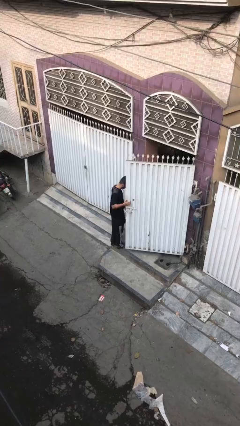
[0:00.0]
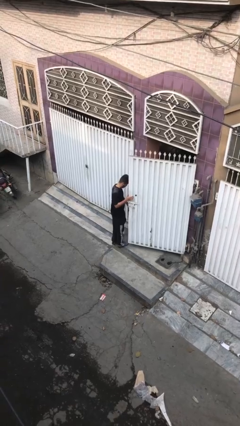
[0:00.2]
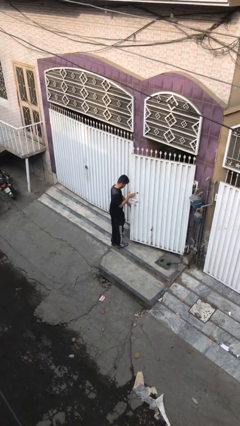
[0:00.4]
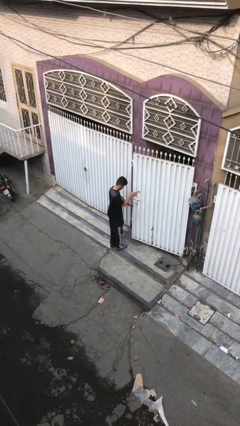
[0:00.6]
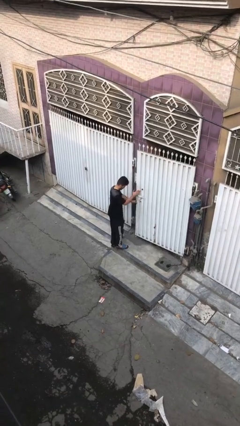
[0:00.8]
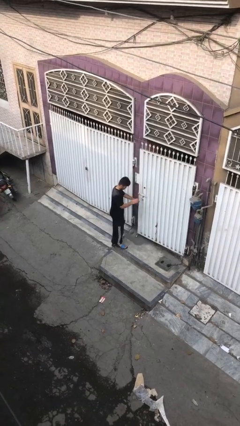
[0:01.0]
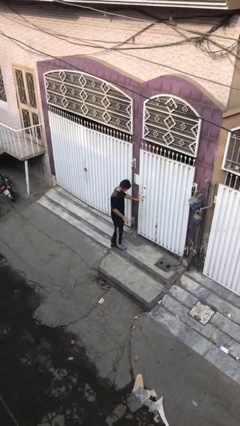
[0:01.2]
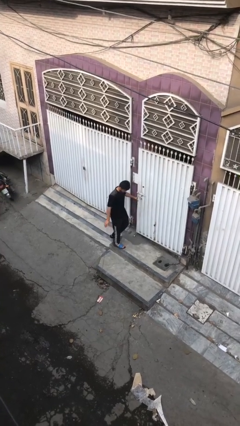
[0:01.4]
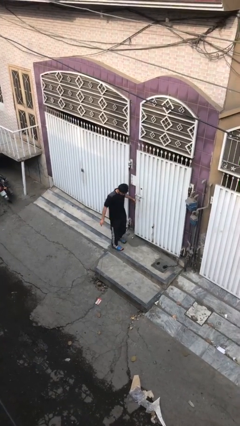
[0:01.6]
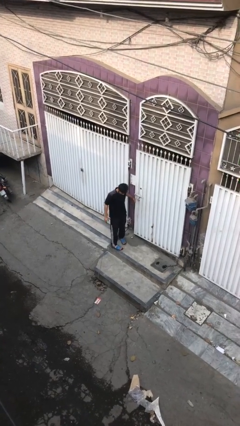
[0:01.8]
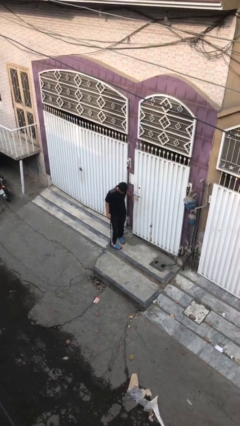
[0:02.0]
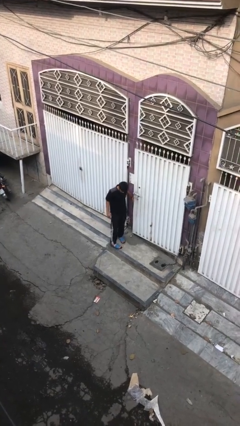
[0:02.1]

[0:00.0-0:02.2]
person closes facility door

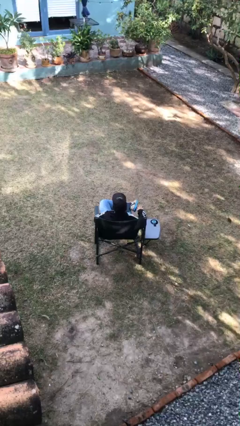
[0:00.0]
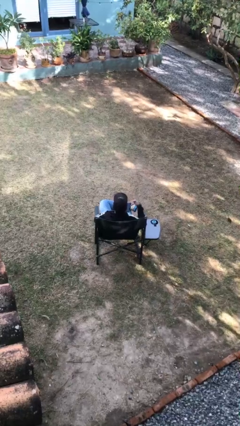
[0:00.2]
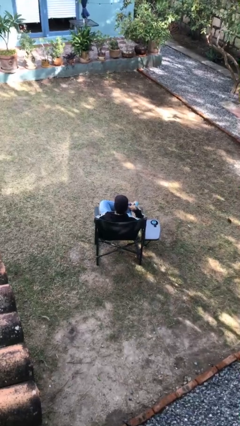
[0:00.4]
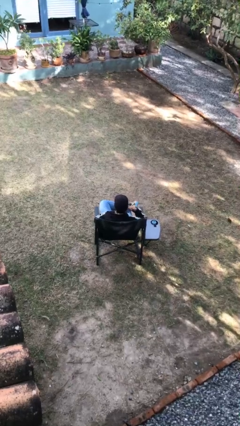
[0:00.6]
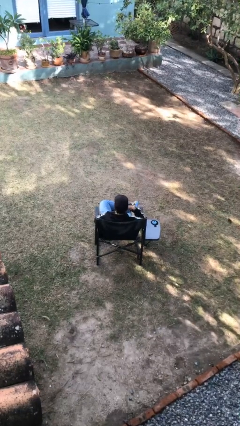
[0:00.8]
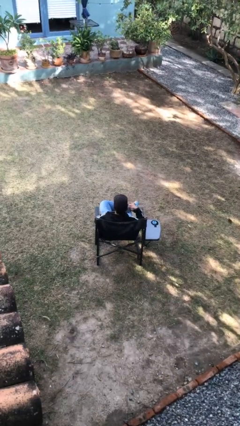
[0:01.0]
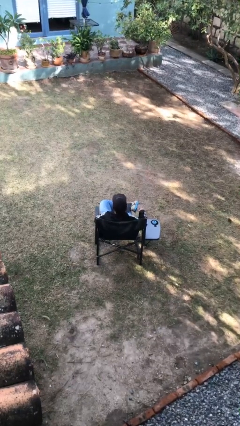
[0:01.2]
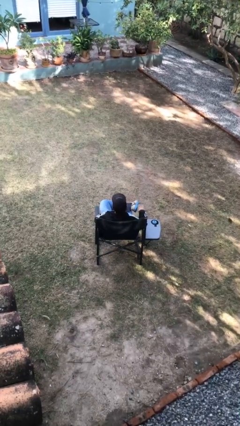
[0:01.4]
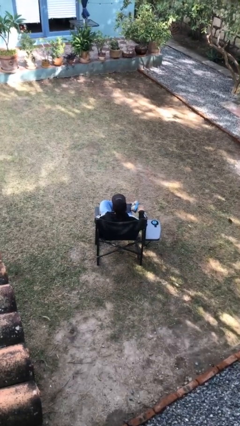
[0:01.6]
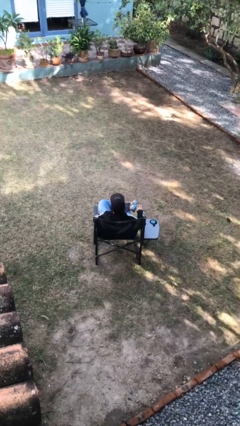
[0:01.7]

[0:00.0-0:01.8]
person gestures call me

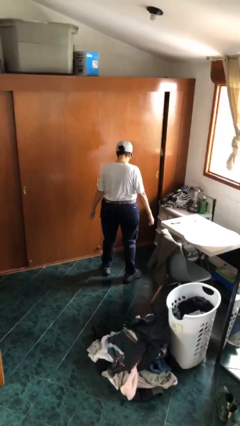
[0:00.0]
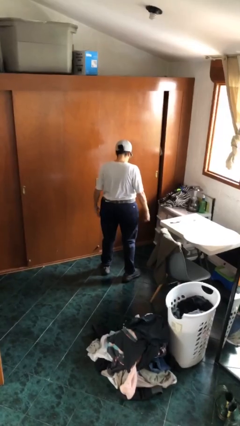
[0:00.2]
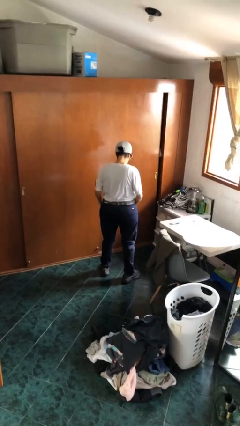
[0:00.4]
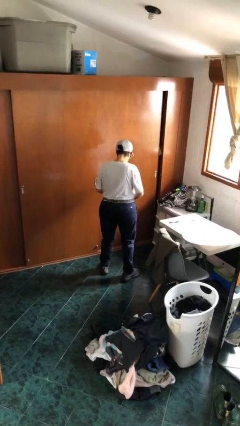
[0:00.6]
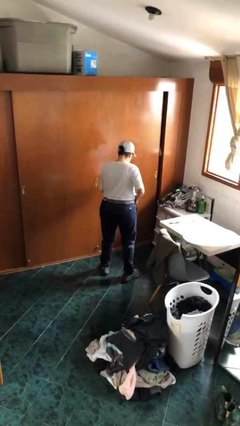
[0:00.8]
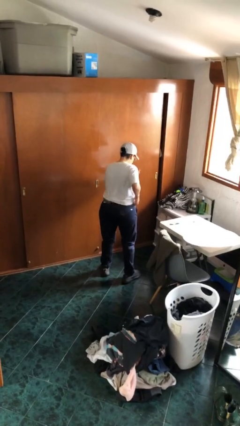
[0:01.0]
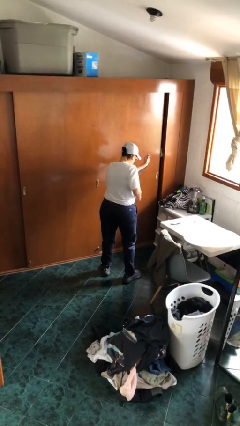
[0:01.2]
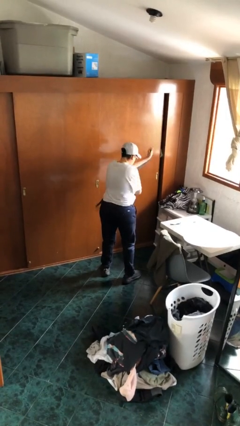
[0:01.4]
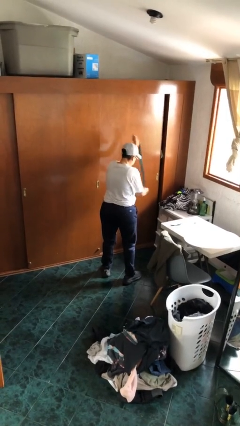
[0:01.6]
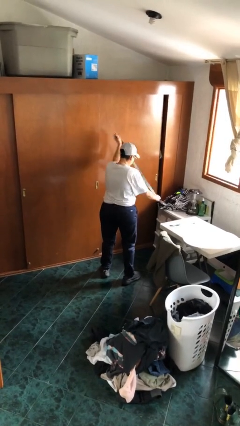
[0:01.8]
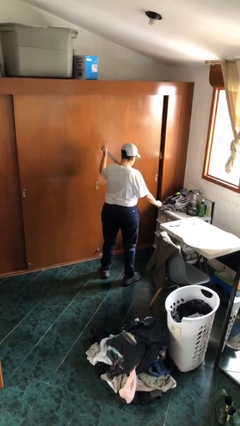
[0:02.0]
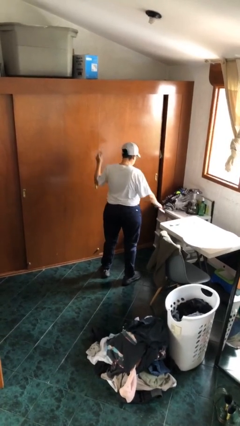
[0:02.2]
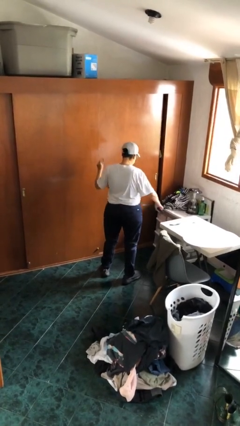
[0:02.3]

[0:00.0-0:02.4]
person takes off belt

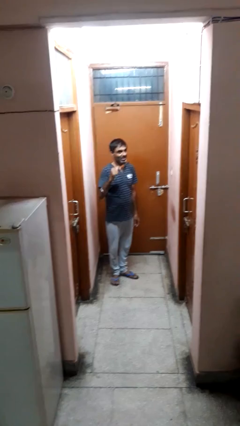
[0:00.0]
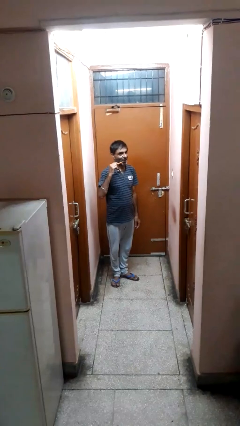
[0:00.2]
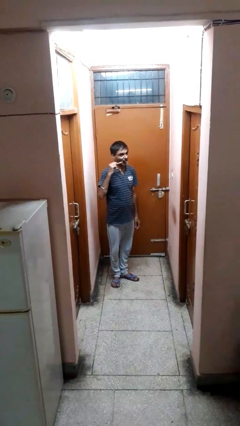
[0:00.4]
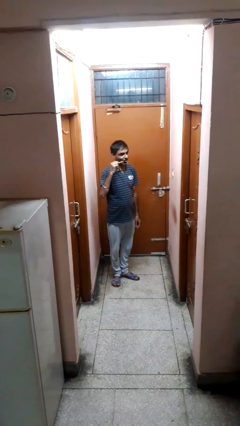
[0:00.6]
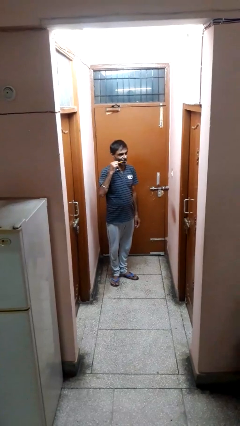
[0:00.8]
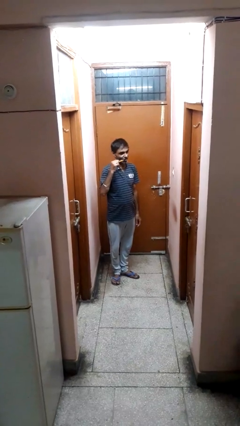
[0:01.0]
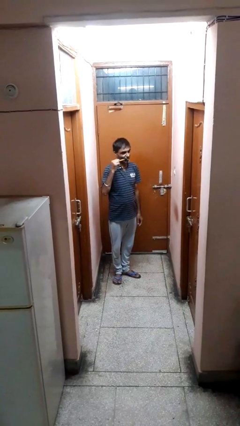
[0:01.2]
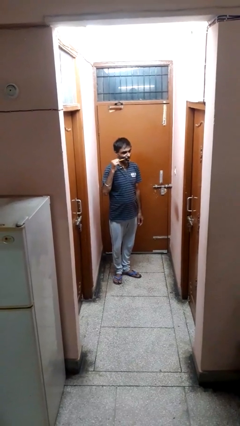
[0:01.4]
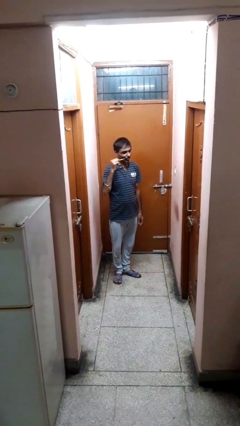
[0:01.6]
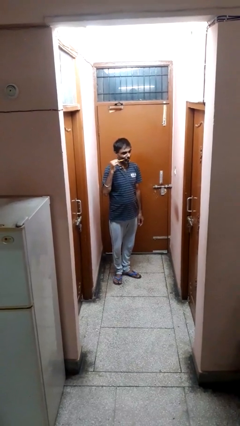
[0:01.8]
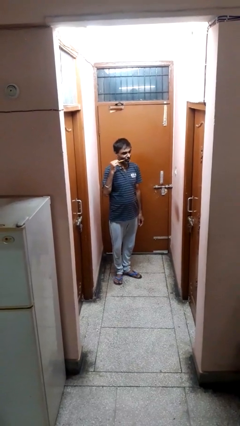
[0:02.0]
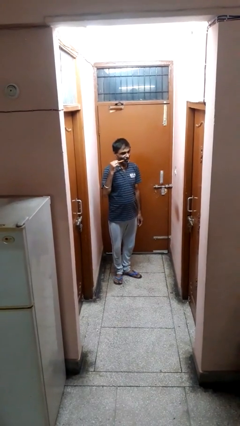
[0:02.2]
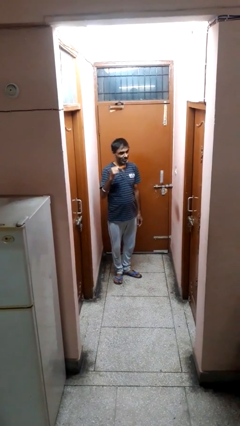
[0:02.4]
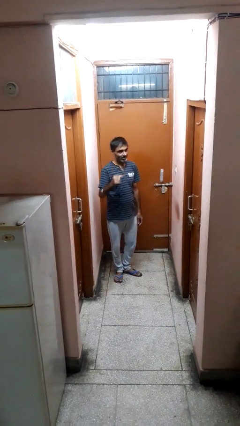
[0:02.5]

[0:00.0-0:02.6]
person brushes teeth

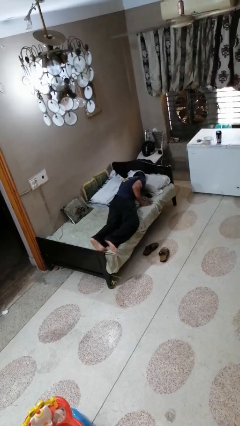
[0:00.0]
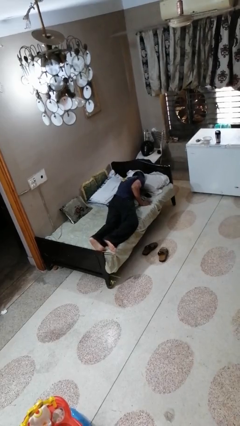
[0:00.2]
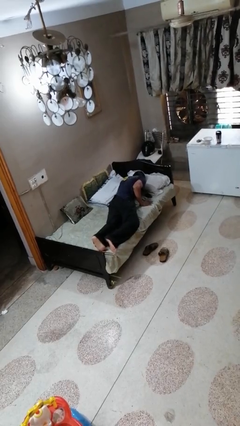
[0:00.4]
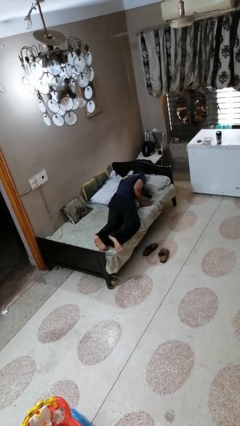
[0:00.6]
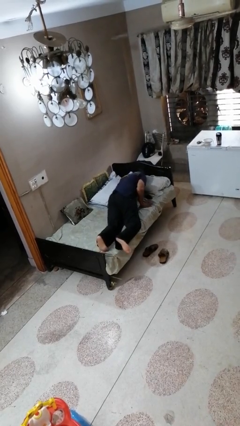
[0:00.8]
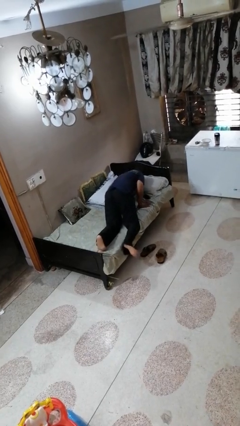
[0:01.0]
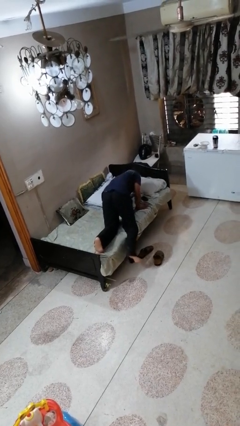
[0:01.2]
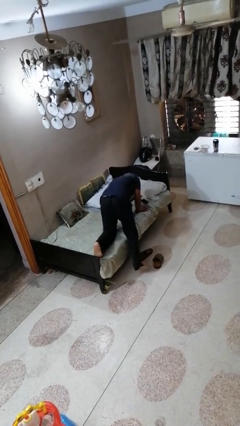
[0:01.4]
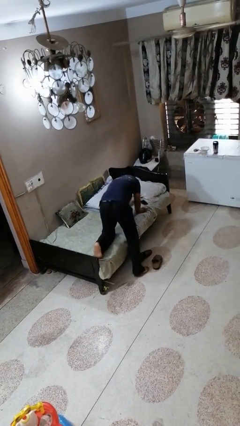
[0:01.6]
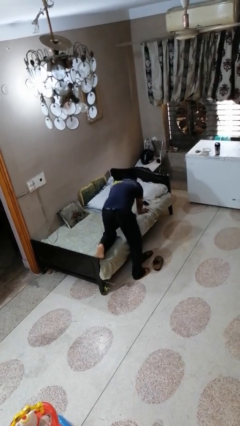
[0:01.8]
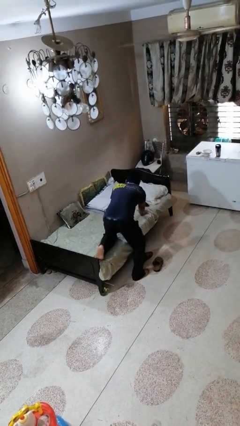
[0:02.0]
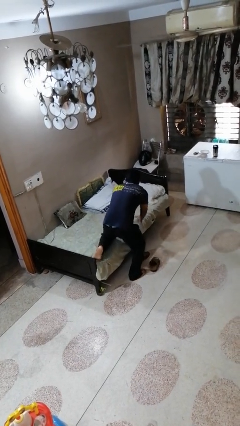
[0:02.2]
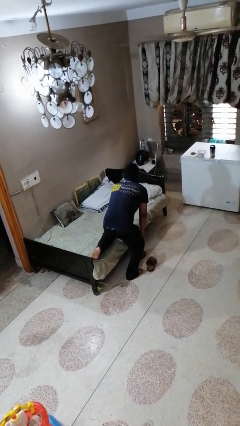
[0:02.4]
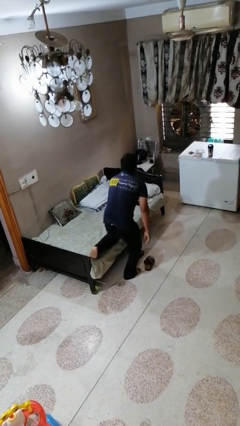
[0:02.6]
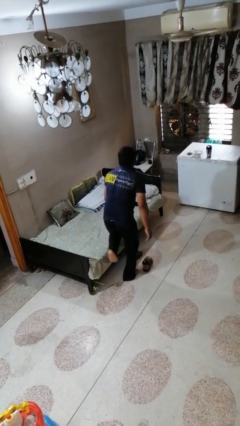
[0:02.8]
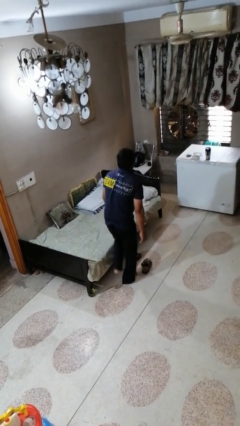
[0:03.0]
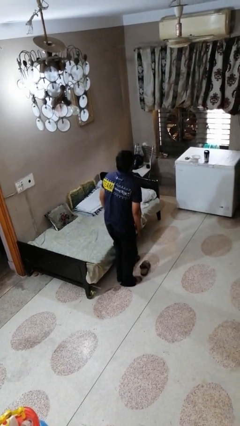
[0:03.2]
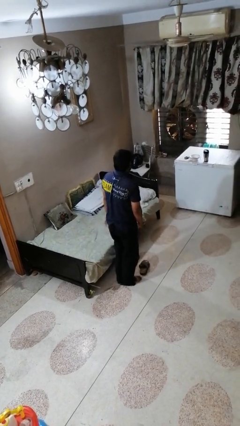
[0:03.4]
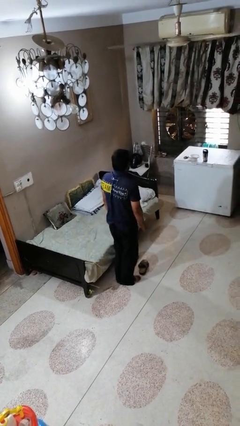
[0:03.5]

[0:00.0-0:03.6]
person stands up

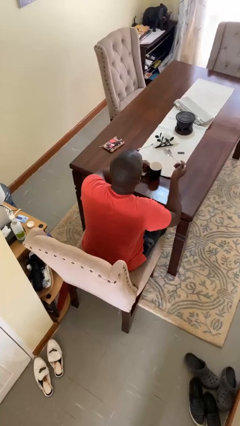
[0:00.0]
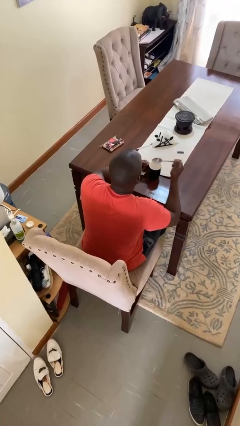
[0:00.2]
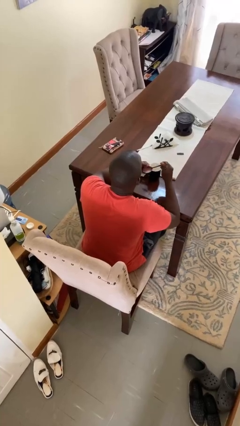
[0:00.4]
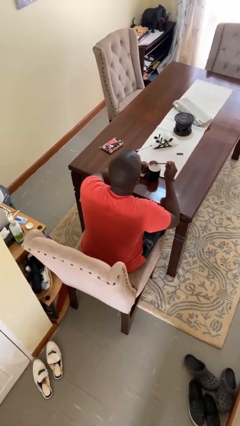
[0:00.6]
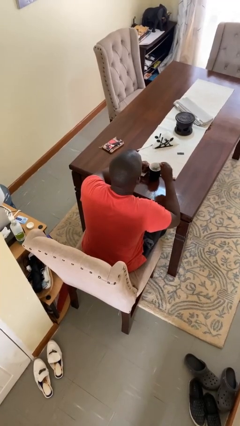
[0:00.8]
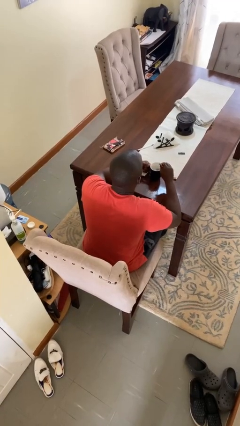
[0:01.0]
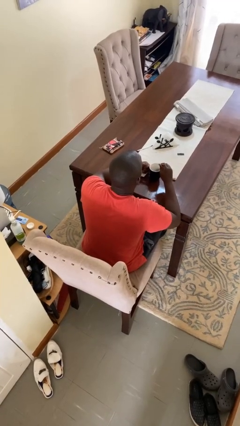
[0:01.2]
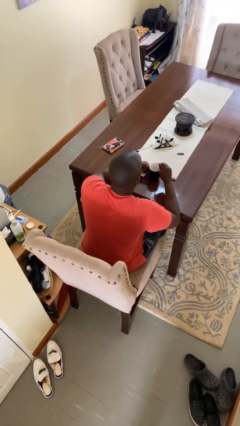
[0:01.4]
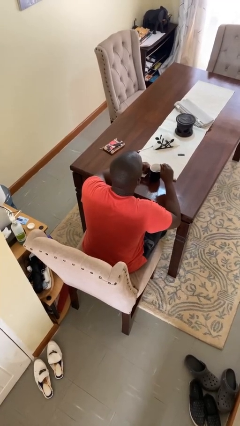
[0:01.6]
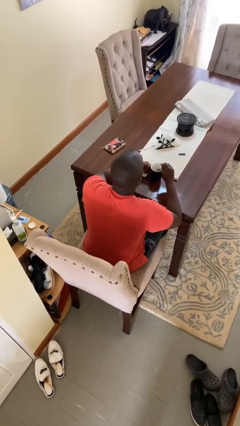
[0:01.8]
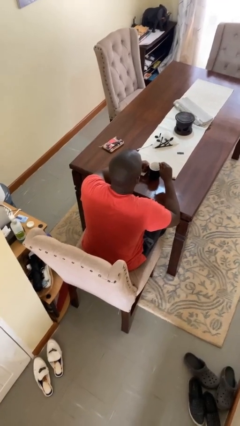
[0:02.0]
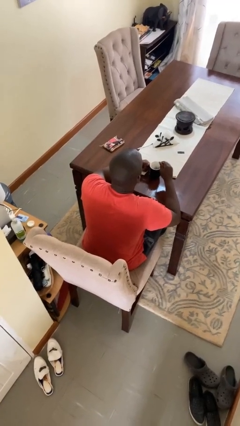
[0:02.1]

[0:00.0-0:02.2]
person stirs mug

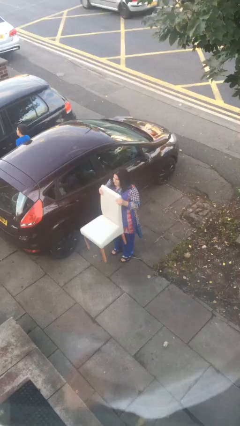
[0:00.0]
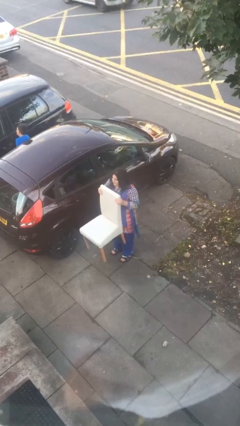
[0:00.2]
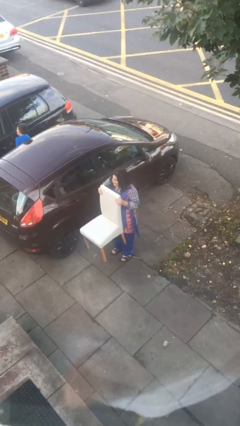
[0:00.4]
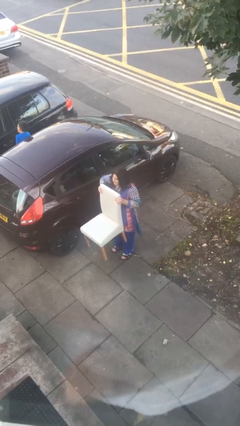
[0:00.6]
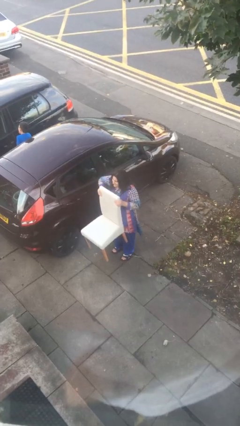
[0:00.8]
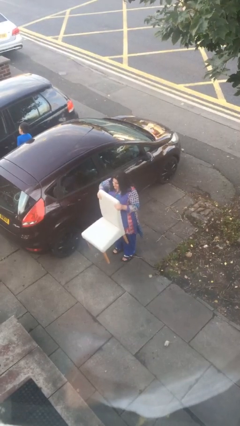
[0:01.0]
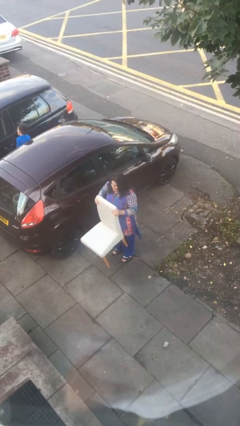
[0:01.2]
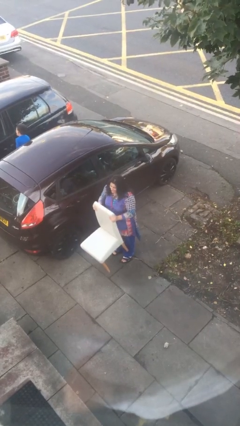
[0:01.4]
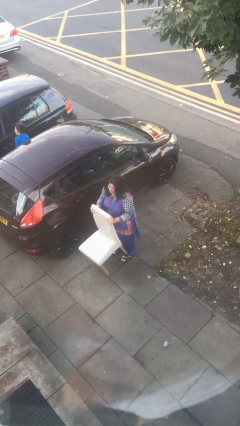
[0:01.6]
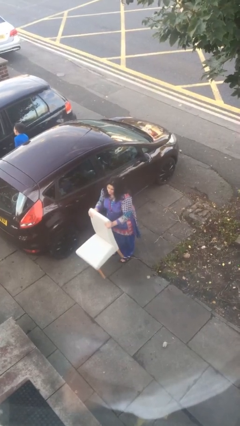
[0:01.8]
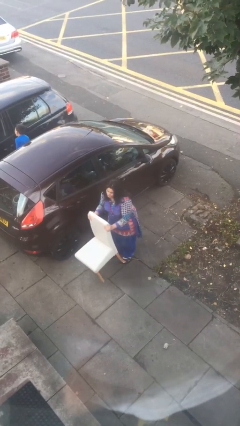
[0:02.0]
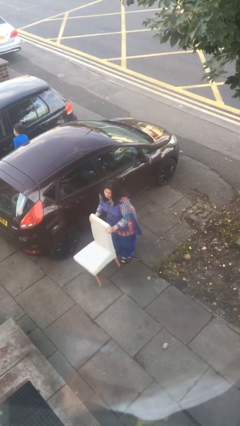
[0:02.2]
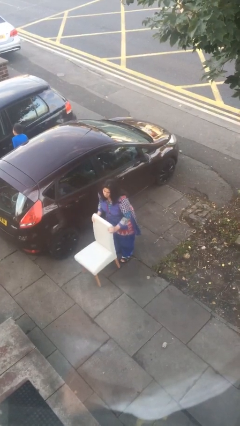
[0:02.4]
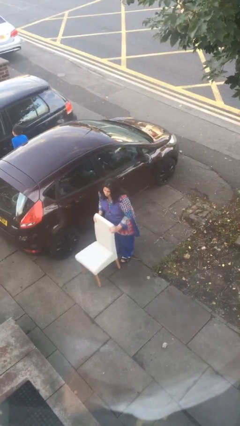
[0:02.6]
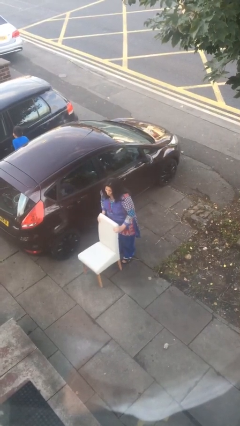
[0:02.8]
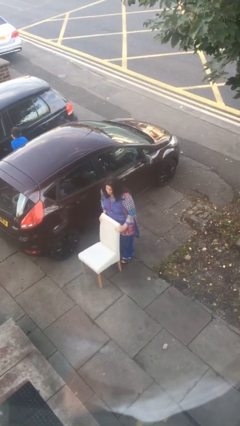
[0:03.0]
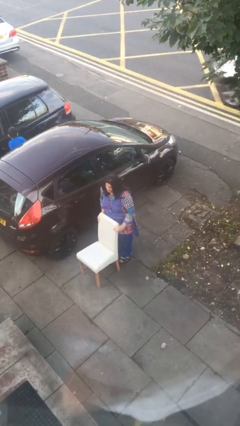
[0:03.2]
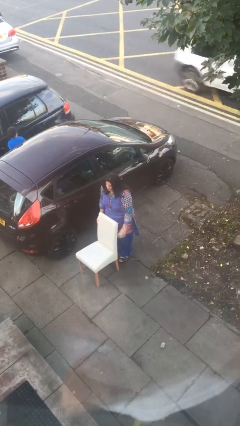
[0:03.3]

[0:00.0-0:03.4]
person puts down object on floor
